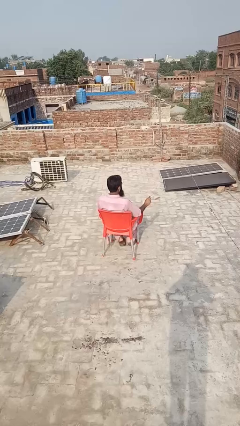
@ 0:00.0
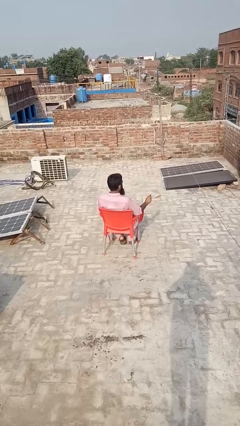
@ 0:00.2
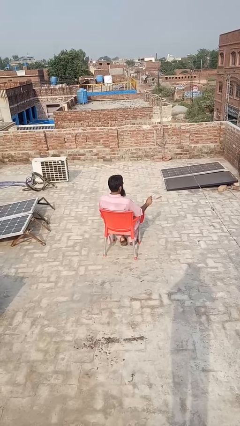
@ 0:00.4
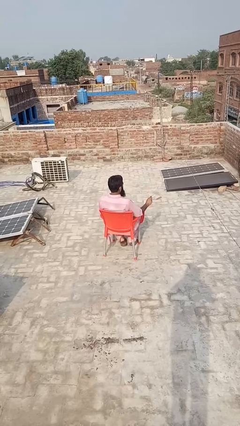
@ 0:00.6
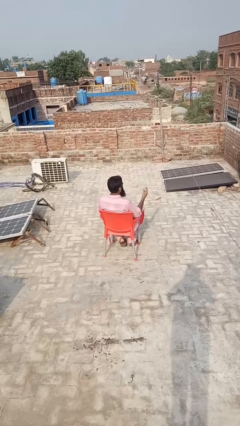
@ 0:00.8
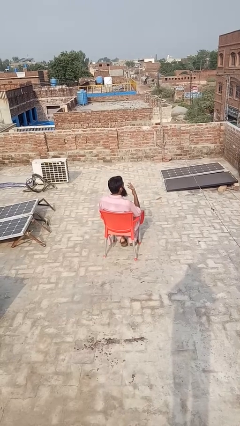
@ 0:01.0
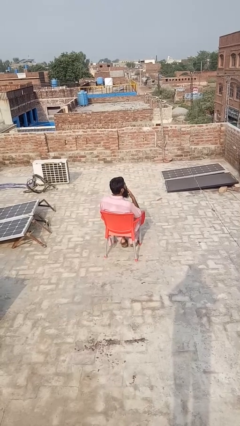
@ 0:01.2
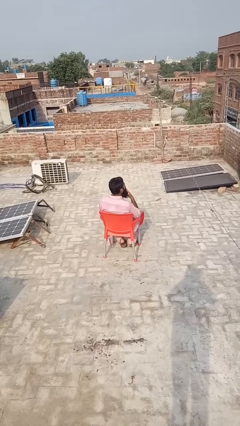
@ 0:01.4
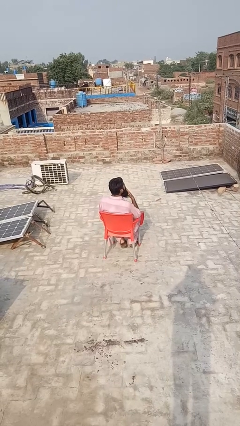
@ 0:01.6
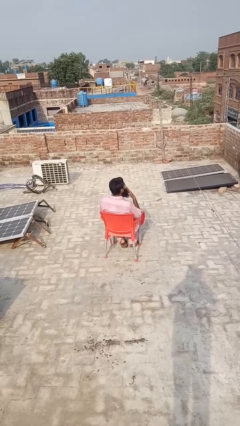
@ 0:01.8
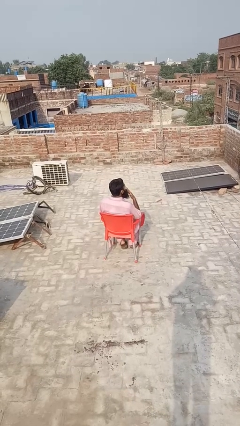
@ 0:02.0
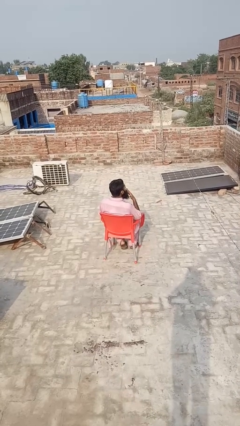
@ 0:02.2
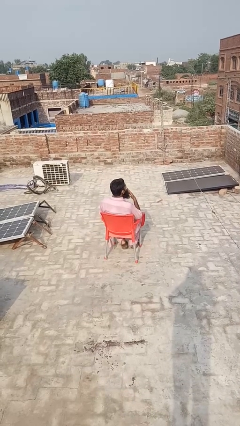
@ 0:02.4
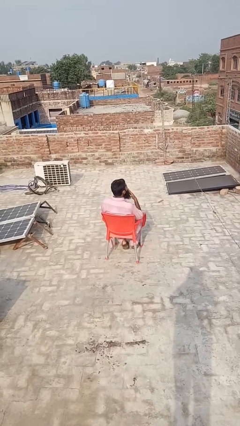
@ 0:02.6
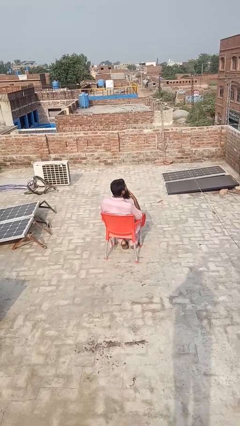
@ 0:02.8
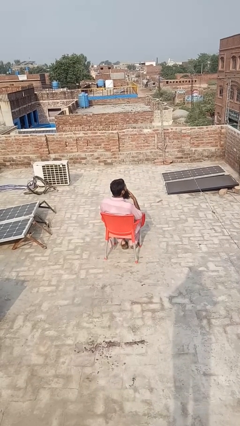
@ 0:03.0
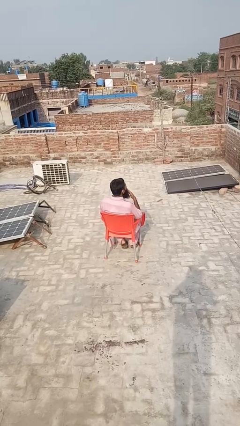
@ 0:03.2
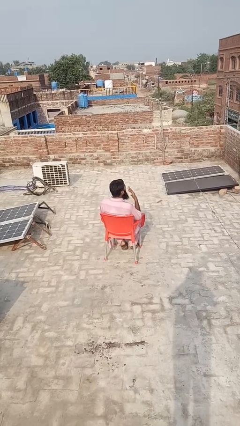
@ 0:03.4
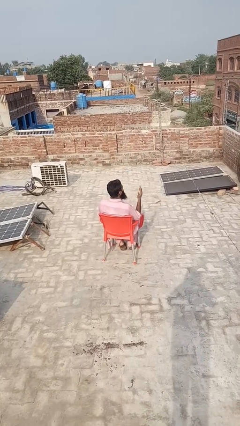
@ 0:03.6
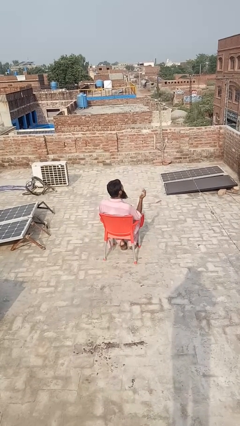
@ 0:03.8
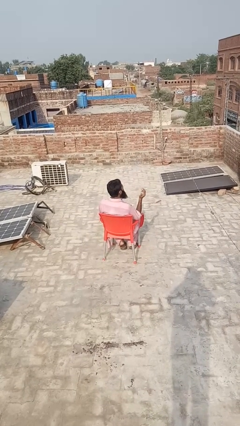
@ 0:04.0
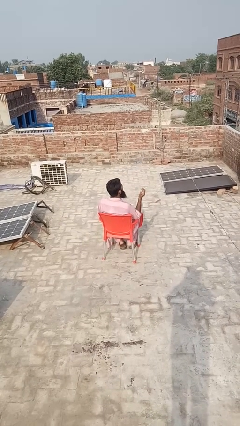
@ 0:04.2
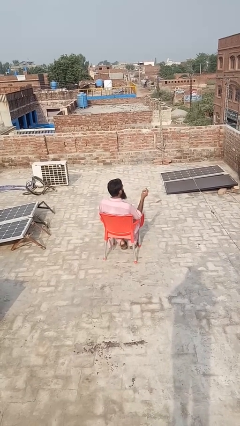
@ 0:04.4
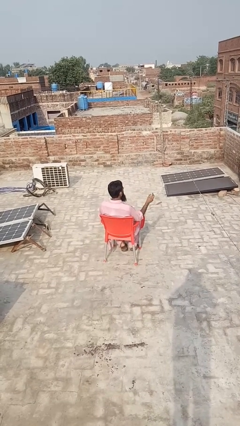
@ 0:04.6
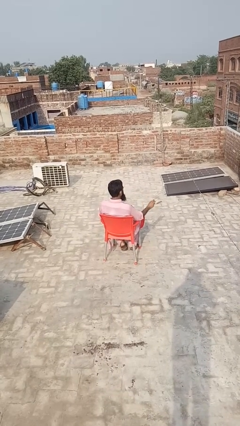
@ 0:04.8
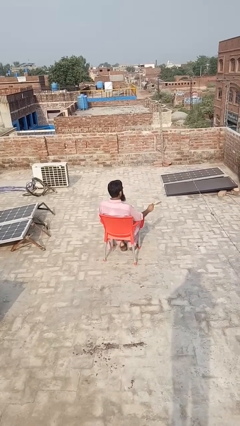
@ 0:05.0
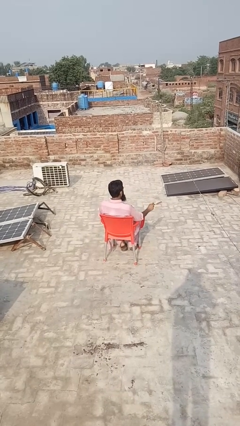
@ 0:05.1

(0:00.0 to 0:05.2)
person vapes

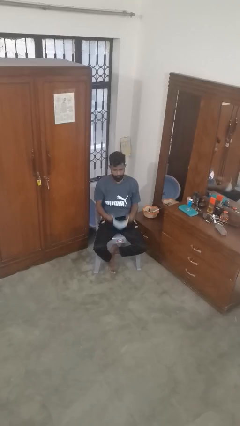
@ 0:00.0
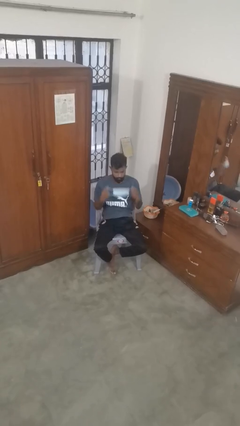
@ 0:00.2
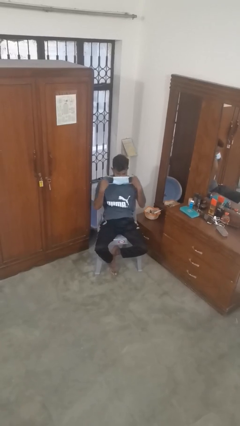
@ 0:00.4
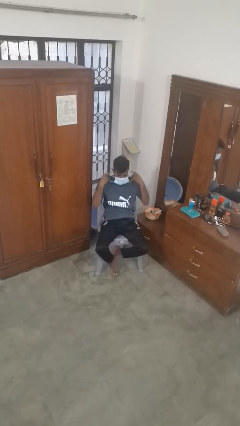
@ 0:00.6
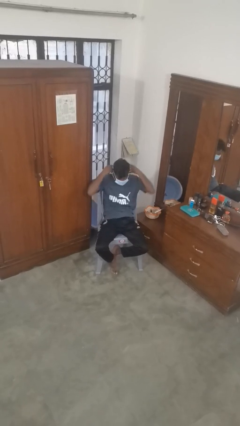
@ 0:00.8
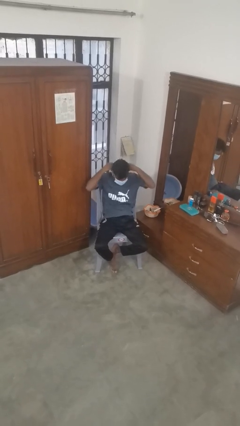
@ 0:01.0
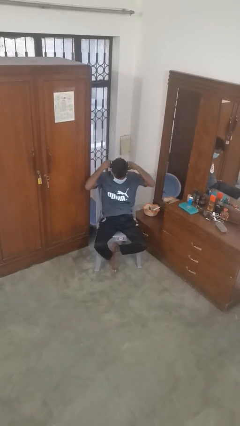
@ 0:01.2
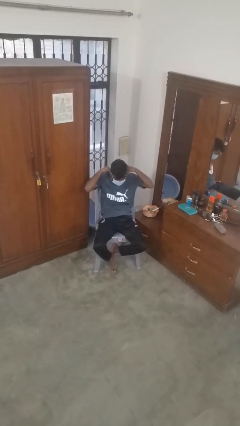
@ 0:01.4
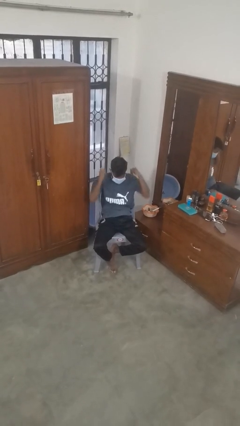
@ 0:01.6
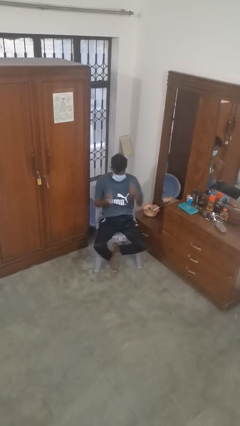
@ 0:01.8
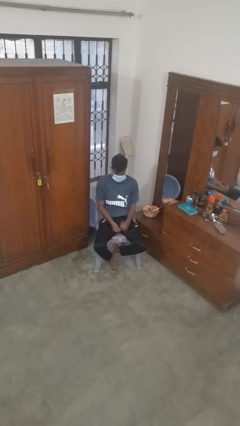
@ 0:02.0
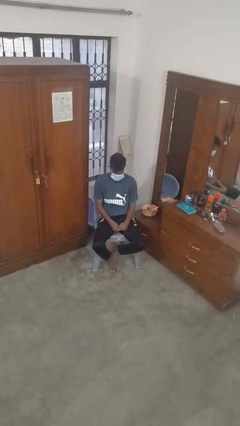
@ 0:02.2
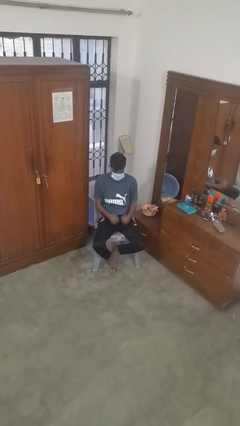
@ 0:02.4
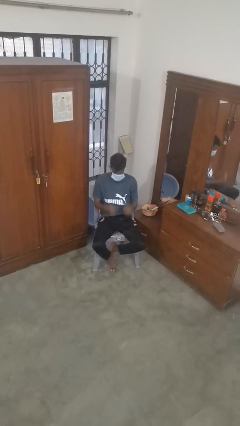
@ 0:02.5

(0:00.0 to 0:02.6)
person puts on facemask

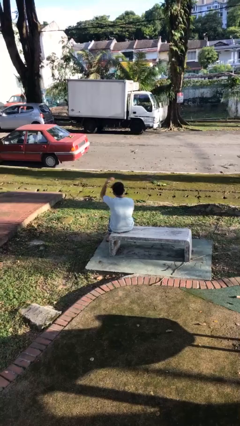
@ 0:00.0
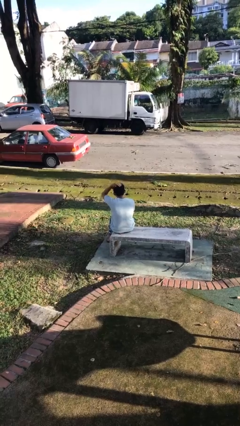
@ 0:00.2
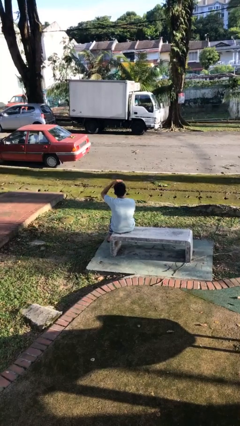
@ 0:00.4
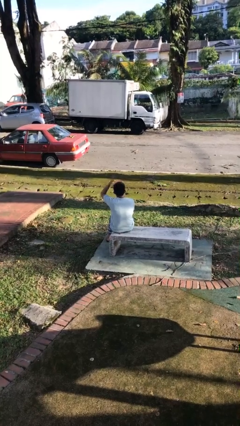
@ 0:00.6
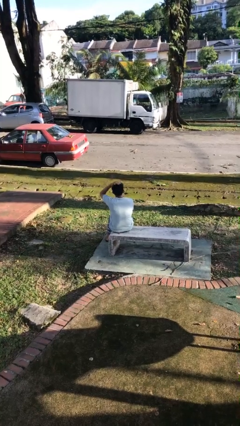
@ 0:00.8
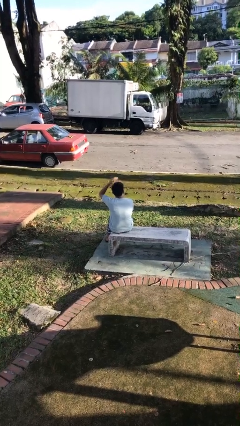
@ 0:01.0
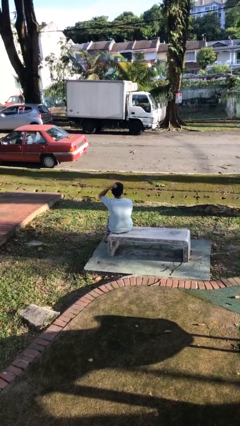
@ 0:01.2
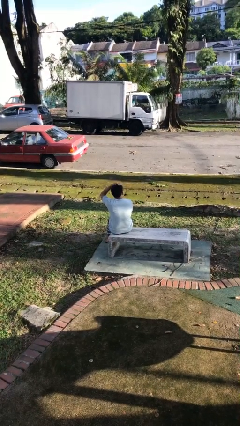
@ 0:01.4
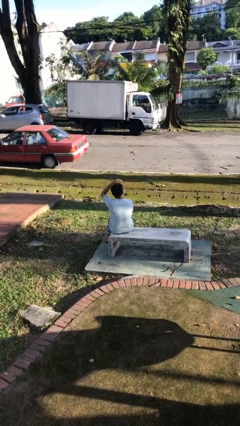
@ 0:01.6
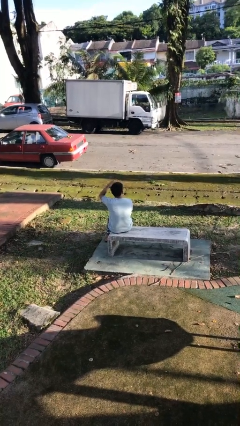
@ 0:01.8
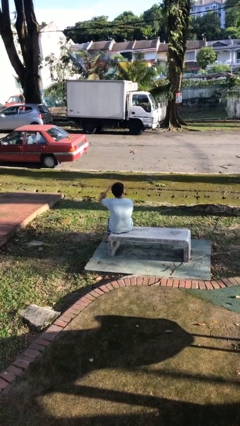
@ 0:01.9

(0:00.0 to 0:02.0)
person pats head

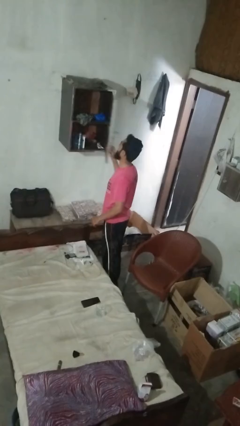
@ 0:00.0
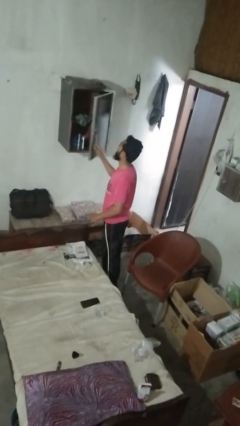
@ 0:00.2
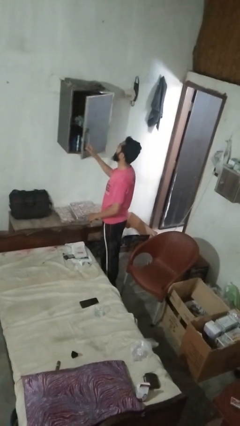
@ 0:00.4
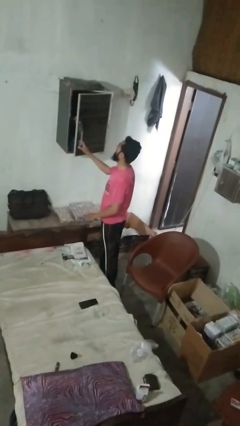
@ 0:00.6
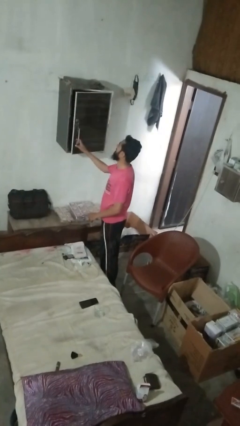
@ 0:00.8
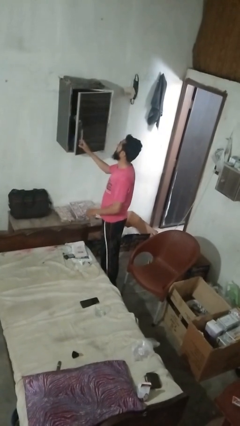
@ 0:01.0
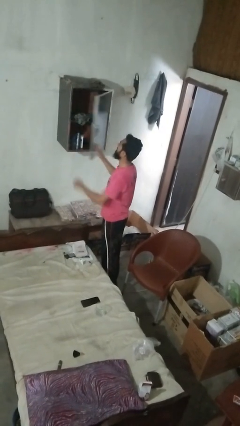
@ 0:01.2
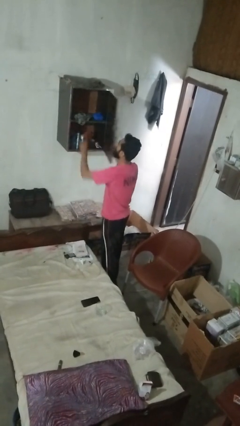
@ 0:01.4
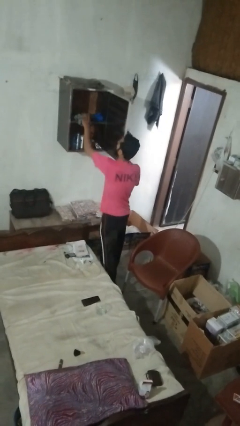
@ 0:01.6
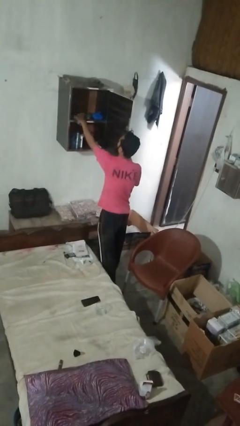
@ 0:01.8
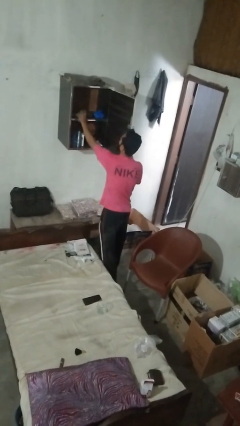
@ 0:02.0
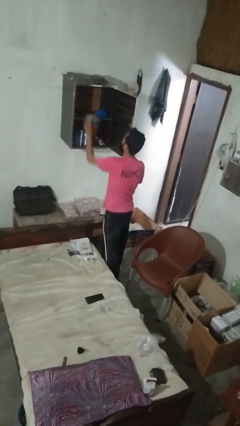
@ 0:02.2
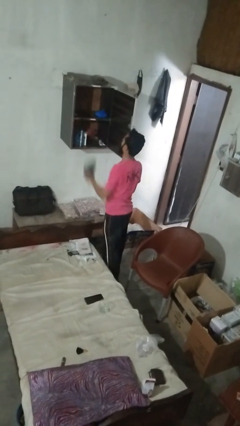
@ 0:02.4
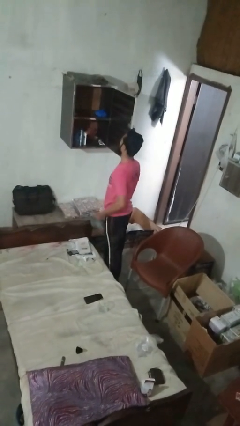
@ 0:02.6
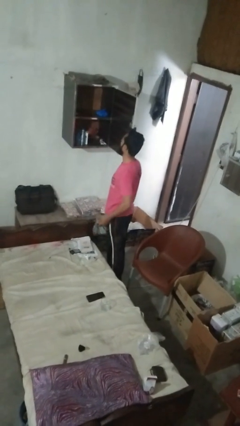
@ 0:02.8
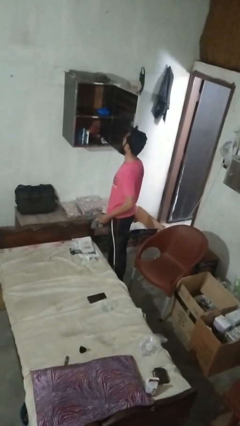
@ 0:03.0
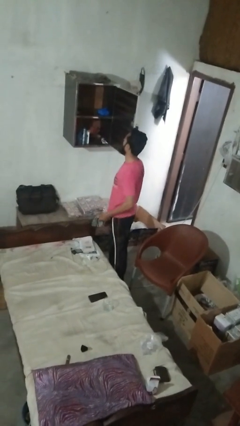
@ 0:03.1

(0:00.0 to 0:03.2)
person takes clothes from dresser

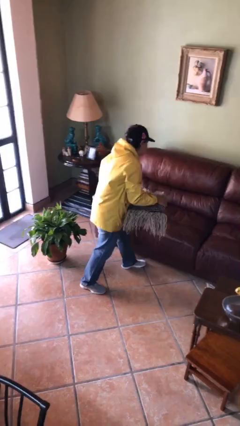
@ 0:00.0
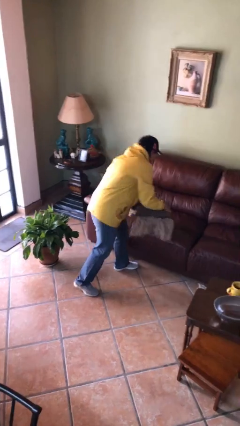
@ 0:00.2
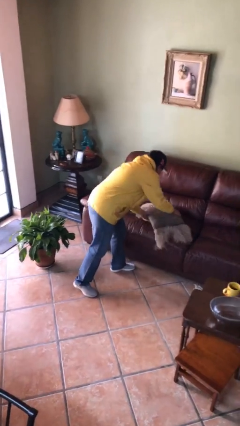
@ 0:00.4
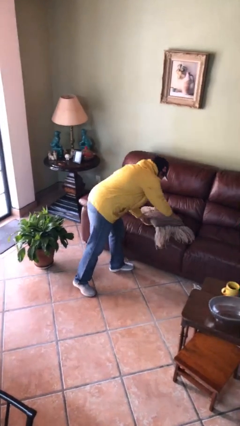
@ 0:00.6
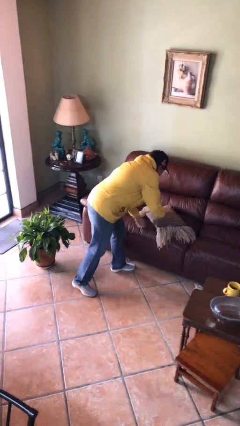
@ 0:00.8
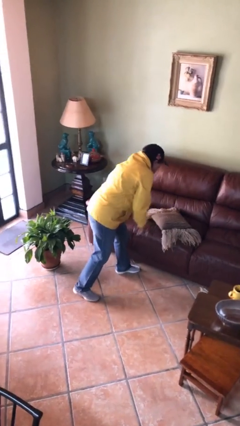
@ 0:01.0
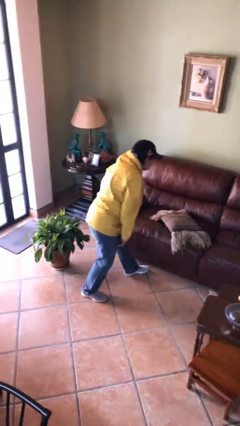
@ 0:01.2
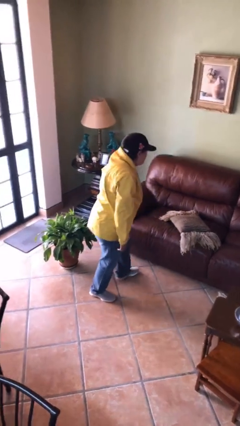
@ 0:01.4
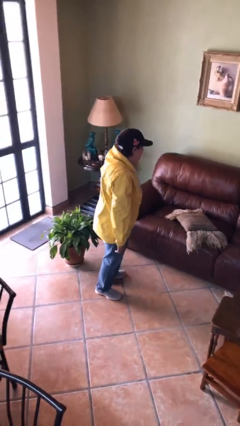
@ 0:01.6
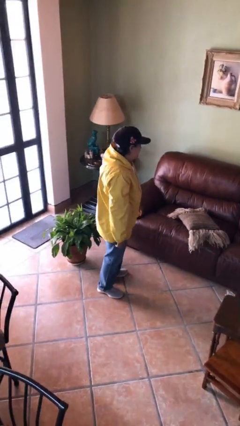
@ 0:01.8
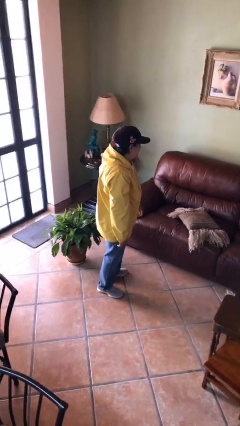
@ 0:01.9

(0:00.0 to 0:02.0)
person puts down object on couch

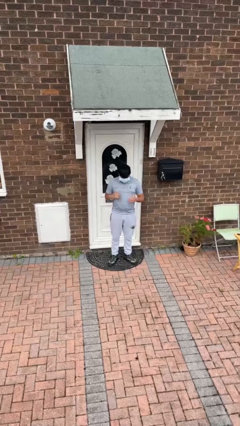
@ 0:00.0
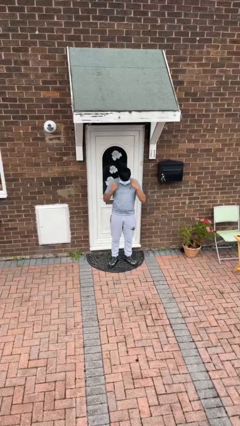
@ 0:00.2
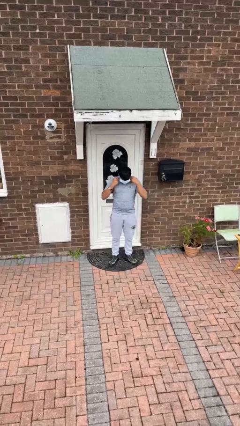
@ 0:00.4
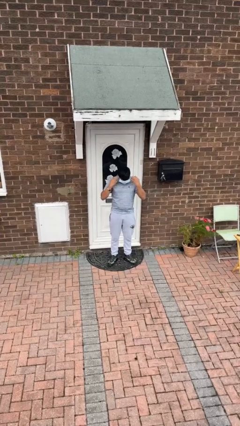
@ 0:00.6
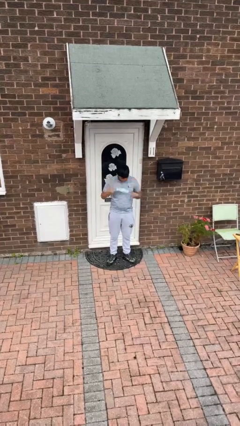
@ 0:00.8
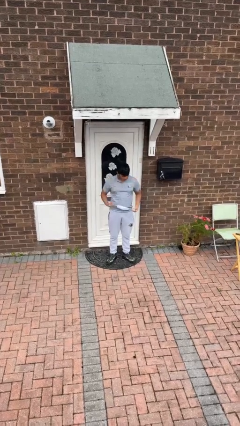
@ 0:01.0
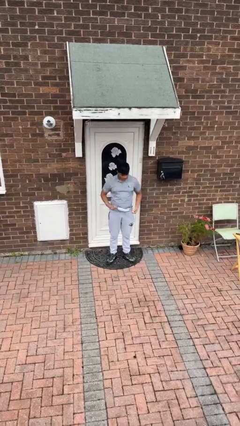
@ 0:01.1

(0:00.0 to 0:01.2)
person takes off facemask

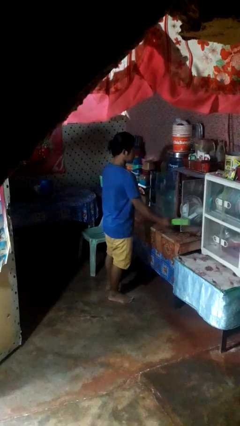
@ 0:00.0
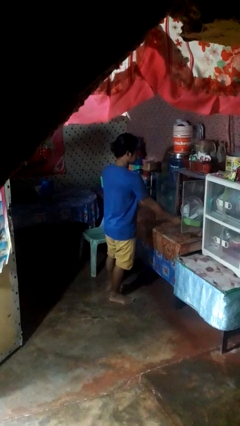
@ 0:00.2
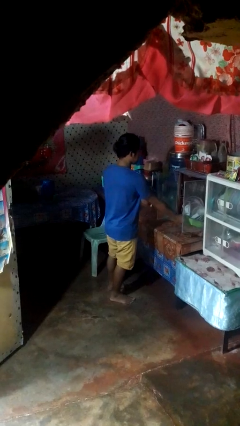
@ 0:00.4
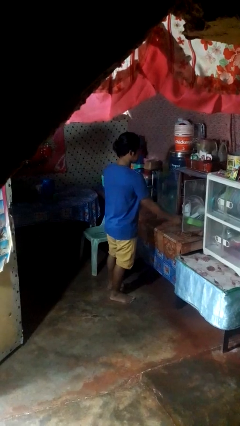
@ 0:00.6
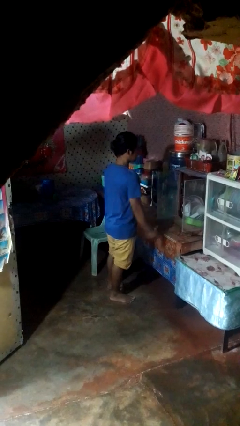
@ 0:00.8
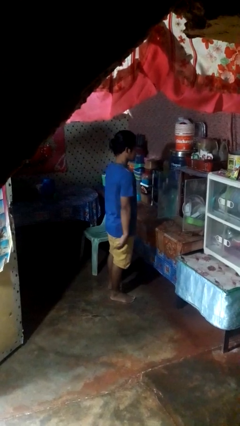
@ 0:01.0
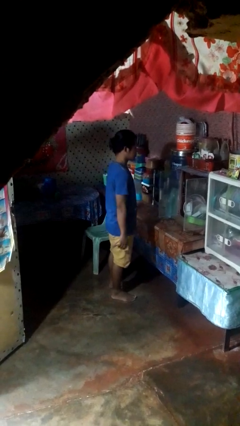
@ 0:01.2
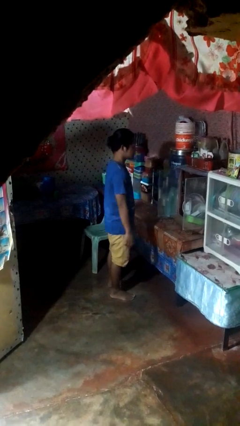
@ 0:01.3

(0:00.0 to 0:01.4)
person puts down object into cabinet
